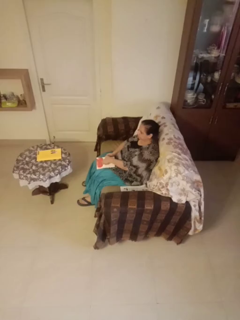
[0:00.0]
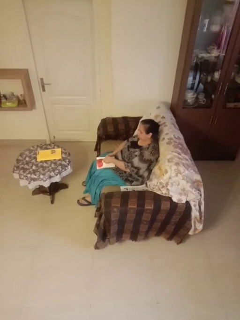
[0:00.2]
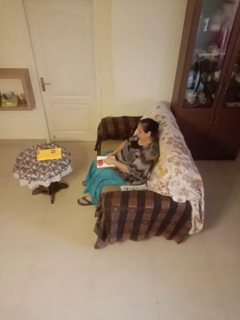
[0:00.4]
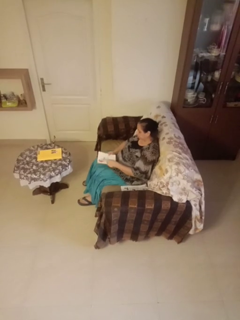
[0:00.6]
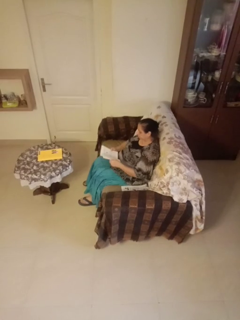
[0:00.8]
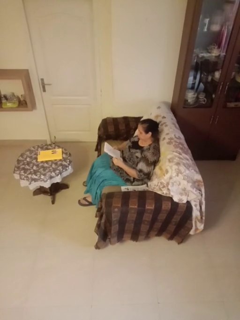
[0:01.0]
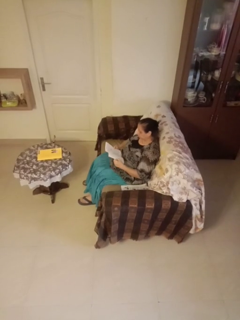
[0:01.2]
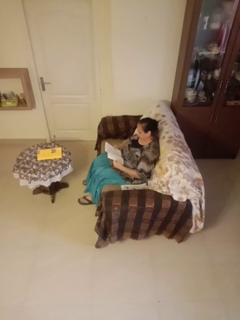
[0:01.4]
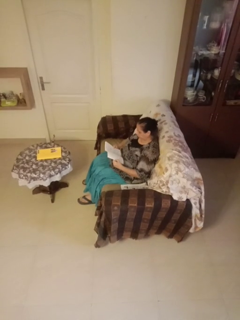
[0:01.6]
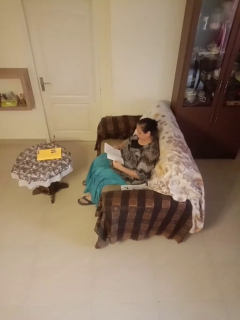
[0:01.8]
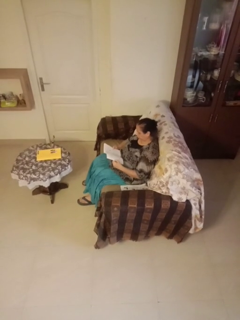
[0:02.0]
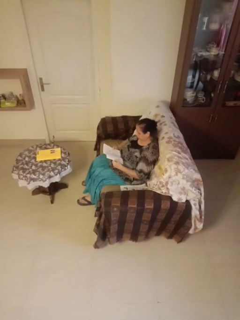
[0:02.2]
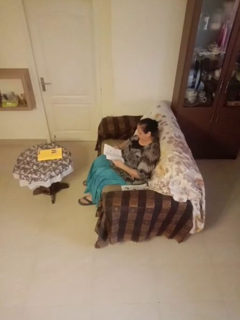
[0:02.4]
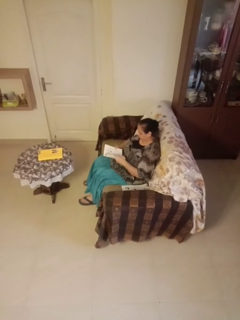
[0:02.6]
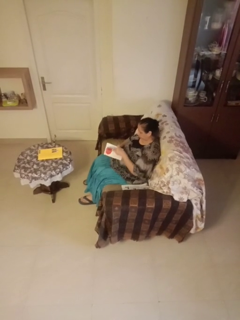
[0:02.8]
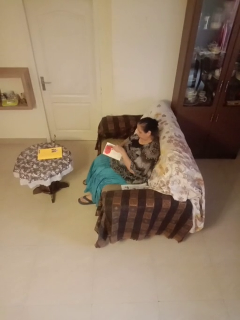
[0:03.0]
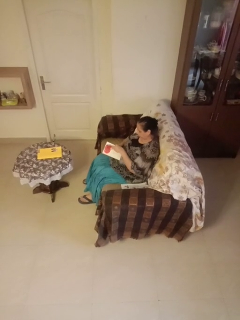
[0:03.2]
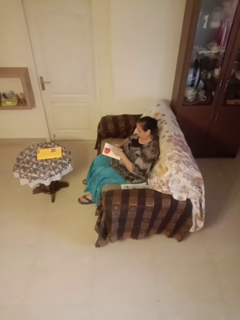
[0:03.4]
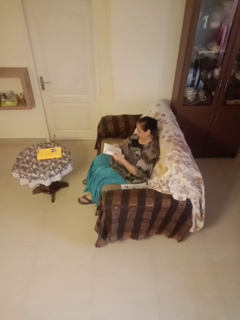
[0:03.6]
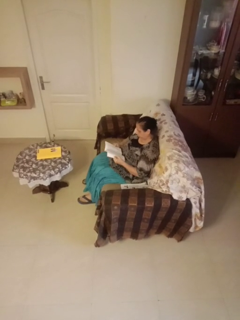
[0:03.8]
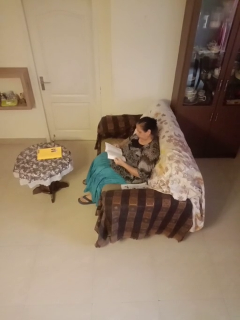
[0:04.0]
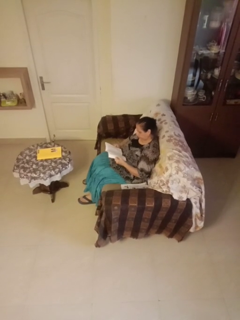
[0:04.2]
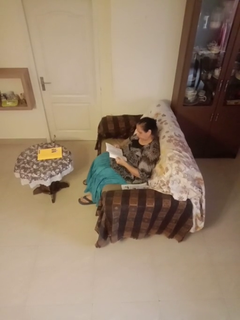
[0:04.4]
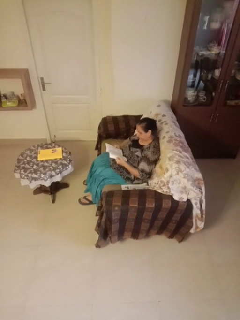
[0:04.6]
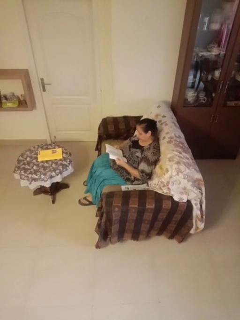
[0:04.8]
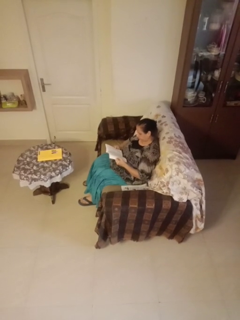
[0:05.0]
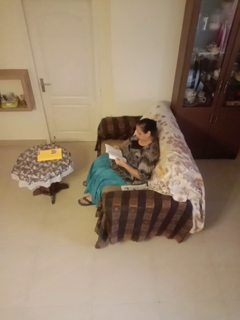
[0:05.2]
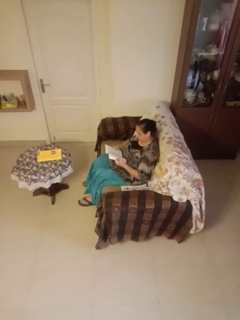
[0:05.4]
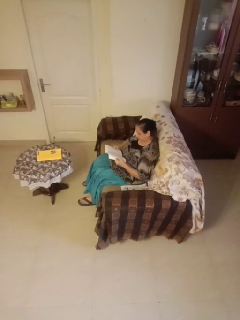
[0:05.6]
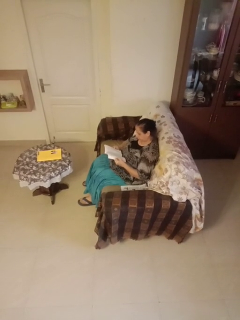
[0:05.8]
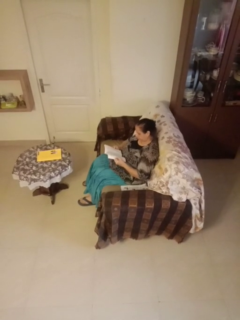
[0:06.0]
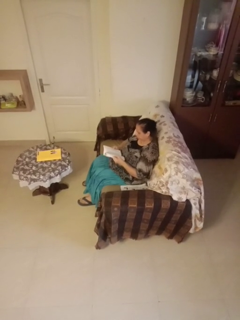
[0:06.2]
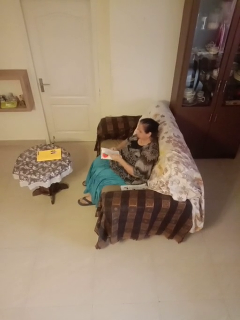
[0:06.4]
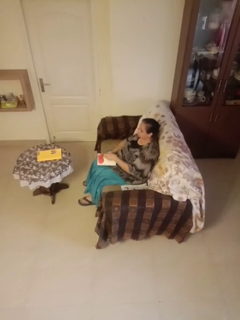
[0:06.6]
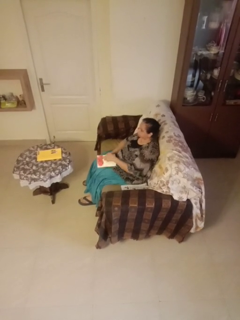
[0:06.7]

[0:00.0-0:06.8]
person reads book

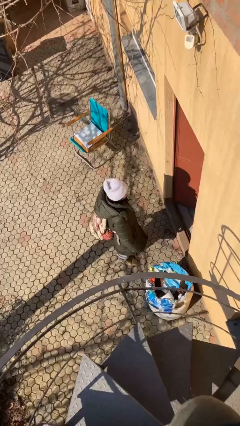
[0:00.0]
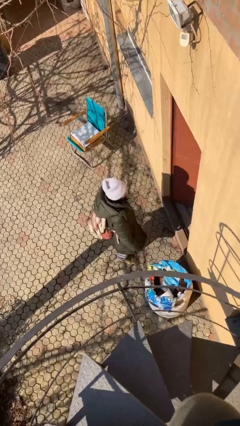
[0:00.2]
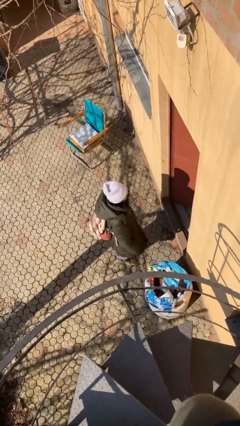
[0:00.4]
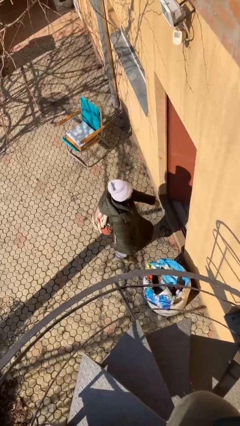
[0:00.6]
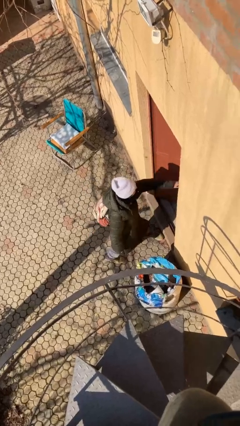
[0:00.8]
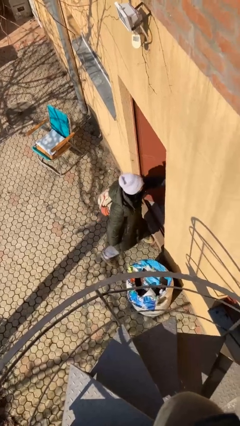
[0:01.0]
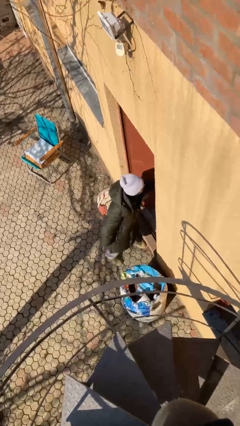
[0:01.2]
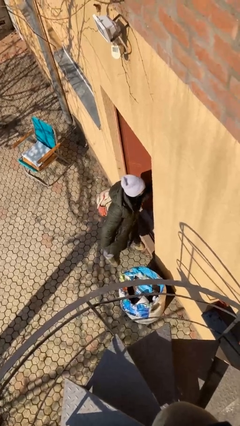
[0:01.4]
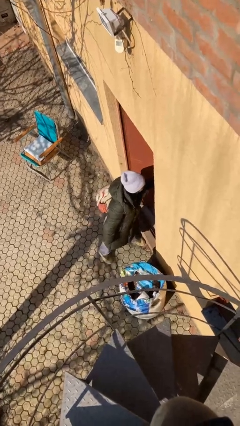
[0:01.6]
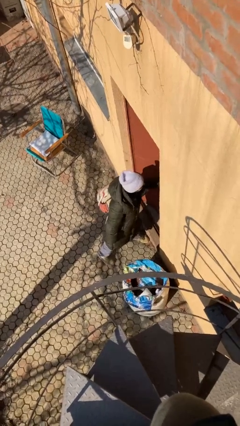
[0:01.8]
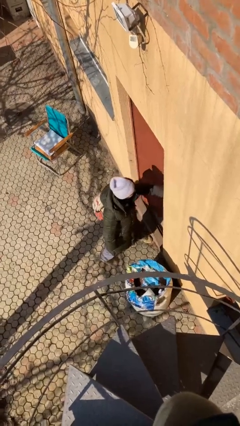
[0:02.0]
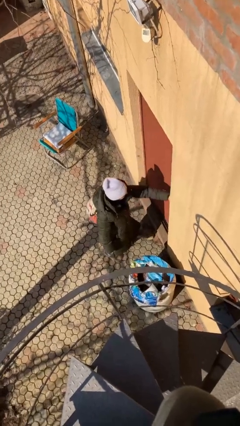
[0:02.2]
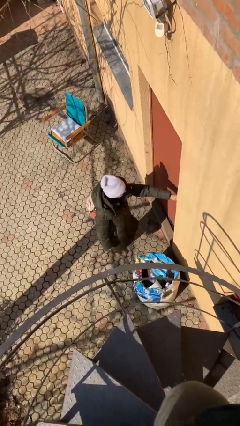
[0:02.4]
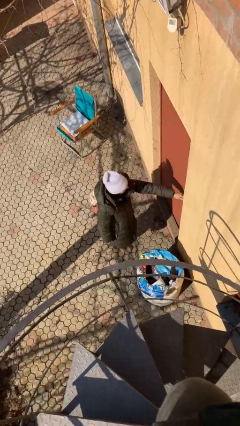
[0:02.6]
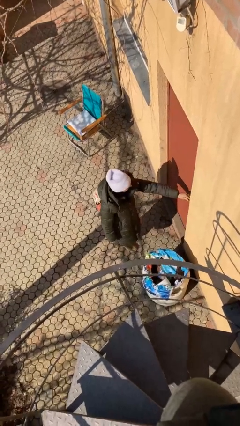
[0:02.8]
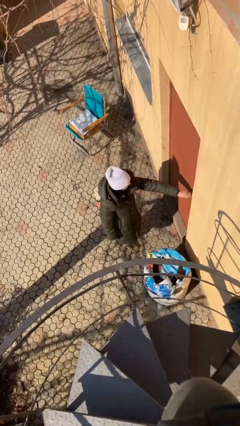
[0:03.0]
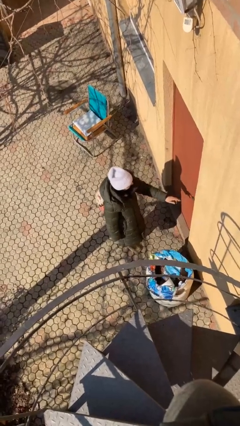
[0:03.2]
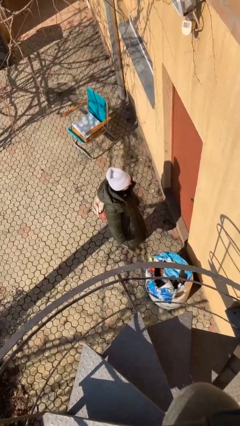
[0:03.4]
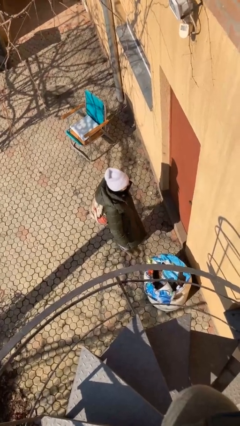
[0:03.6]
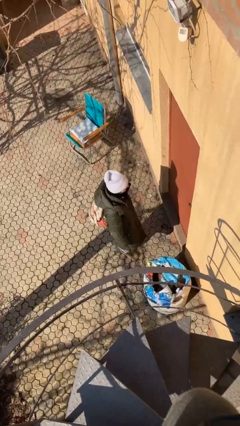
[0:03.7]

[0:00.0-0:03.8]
person closes facility door

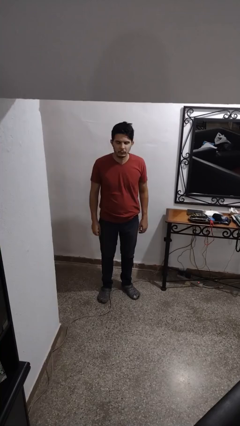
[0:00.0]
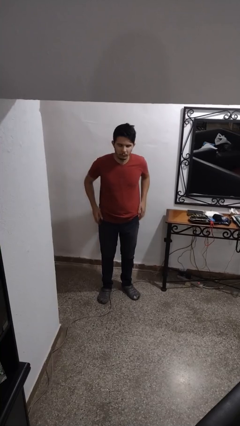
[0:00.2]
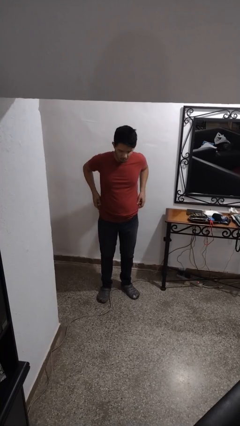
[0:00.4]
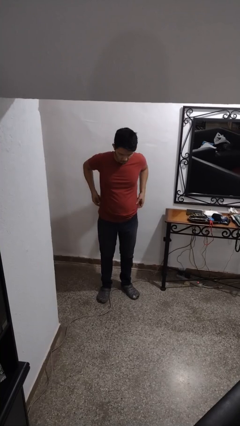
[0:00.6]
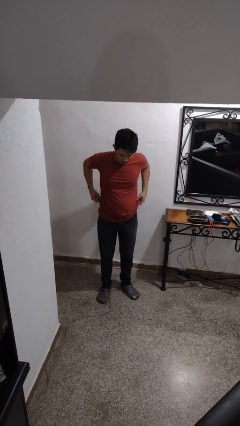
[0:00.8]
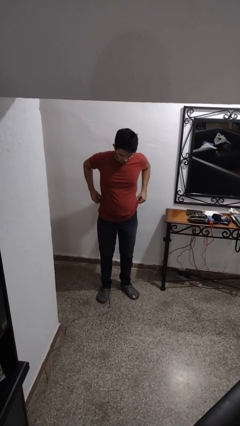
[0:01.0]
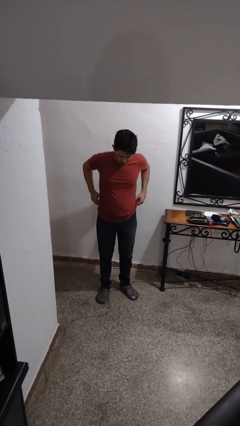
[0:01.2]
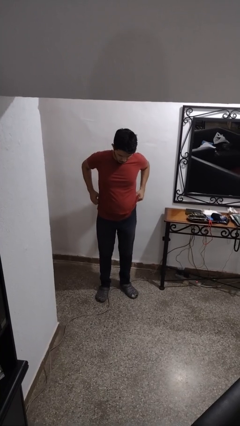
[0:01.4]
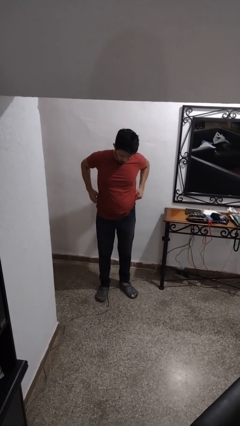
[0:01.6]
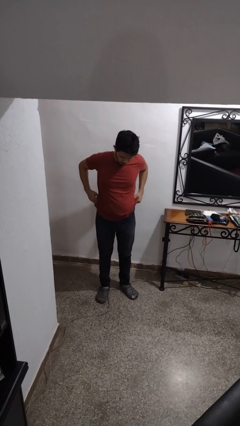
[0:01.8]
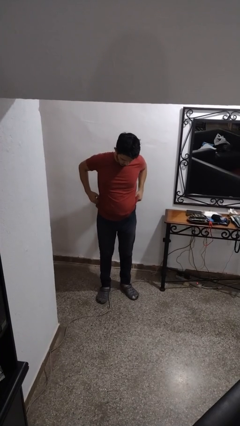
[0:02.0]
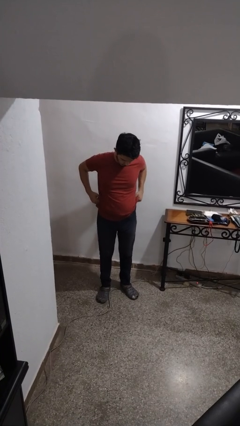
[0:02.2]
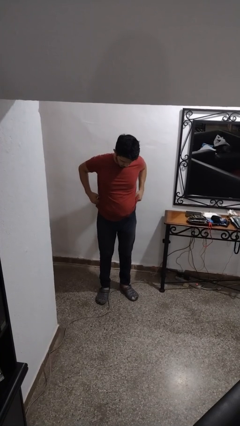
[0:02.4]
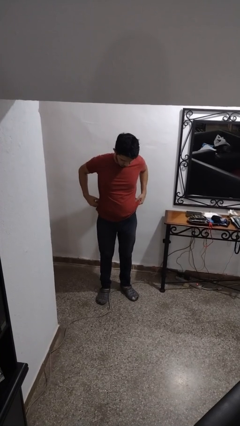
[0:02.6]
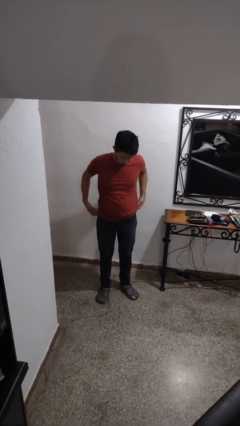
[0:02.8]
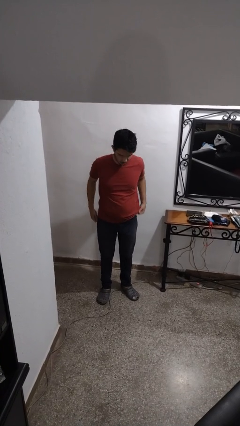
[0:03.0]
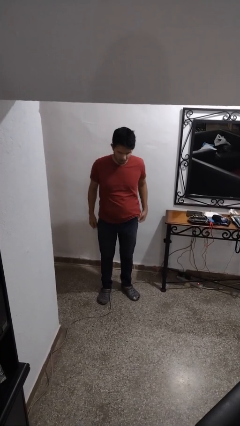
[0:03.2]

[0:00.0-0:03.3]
person hikes up pants

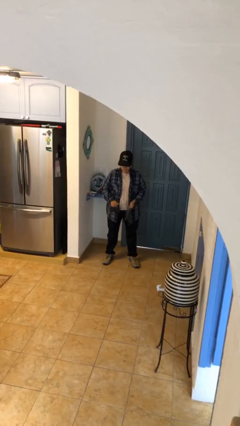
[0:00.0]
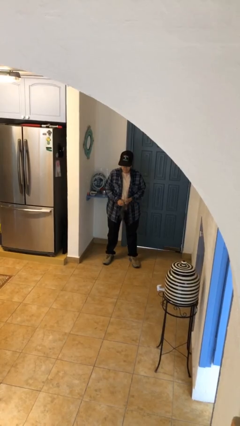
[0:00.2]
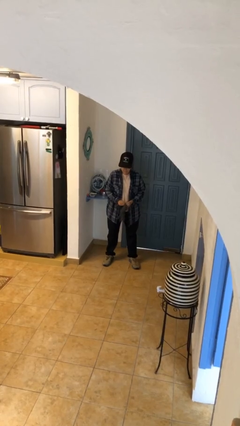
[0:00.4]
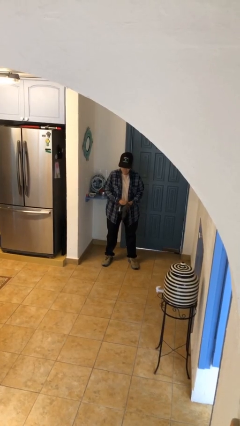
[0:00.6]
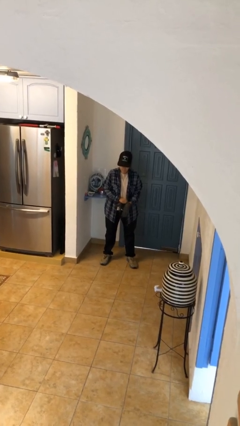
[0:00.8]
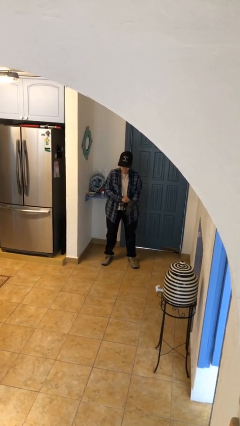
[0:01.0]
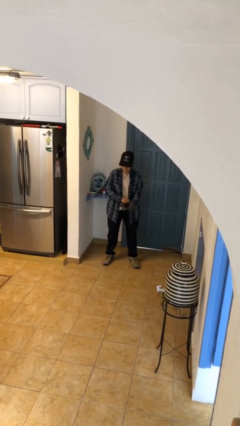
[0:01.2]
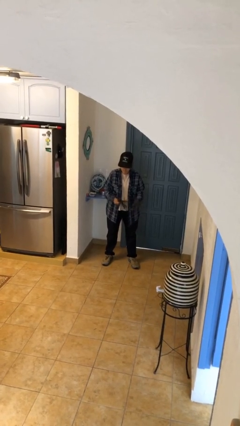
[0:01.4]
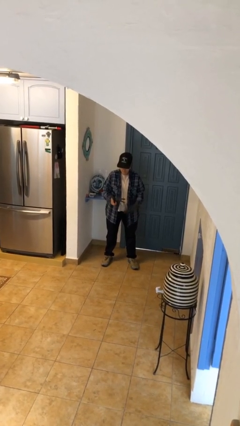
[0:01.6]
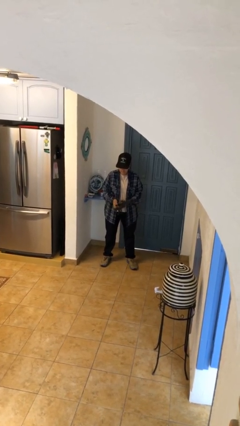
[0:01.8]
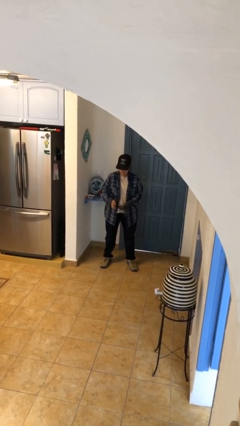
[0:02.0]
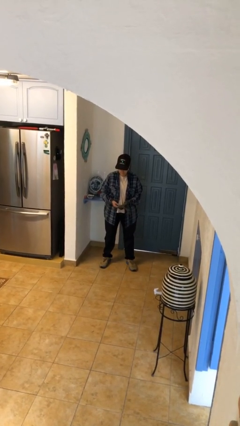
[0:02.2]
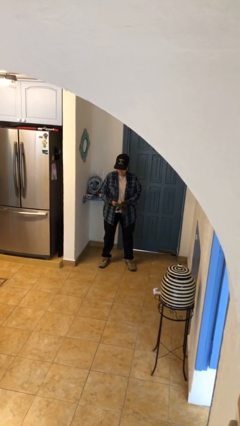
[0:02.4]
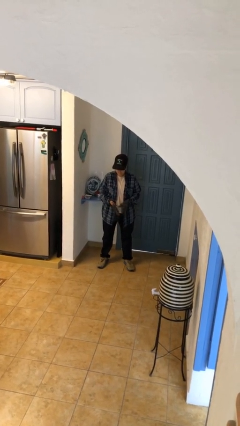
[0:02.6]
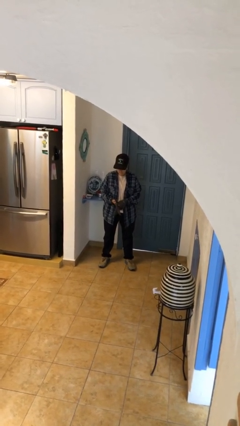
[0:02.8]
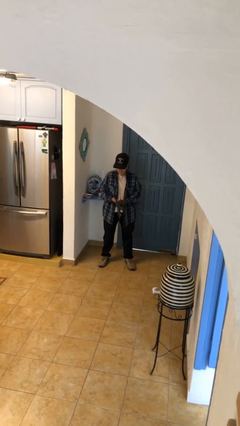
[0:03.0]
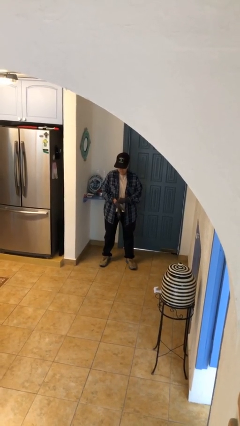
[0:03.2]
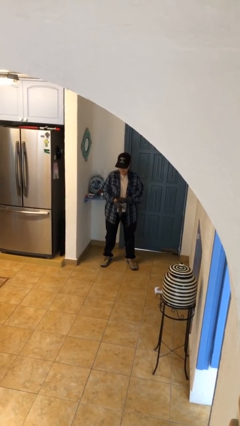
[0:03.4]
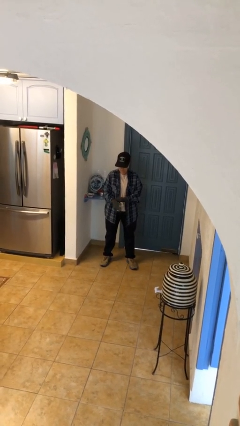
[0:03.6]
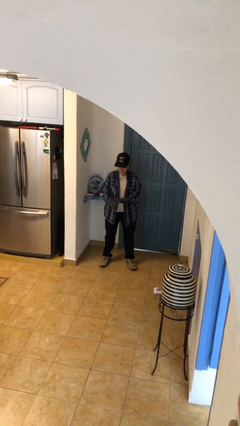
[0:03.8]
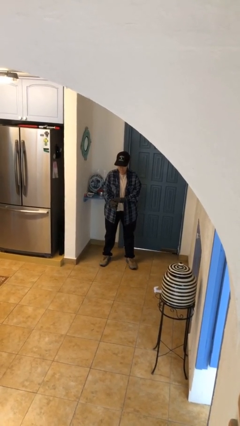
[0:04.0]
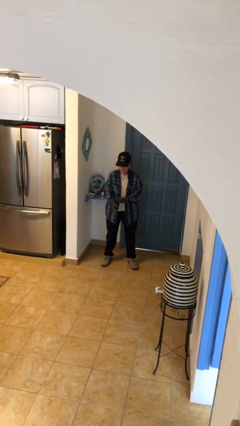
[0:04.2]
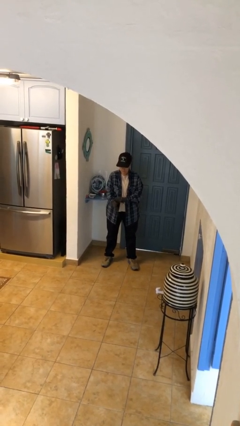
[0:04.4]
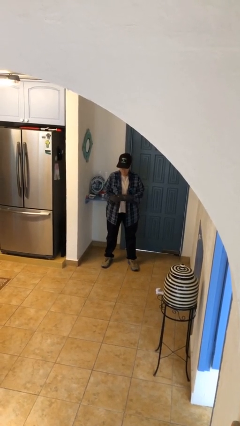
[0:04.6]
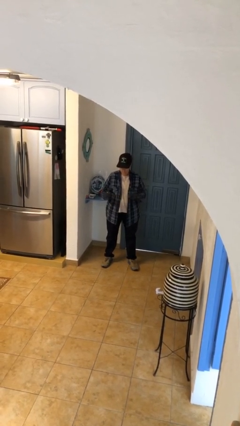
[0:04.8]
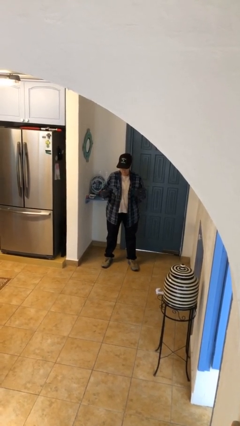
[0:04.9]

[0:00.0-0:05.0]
person puts on gloves

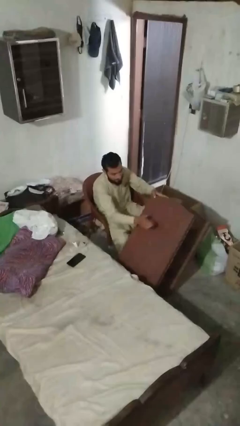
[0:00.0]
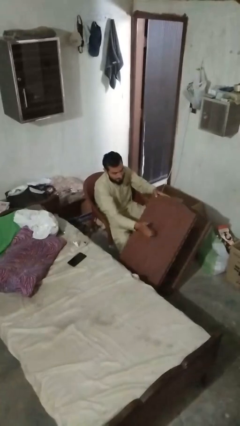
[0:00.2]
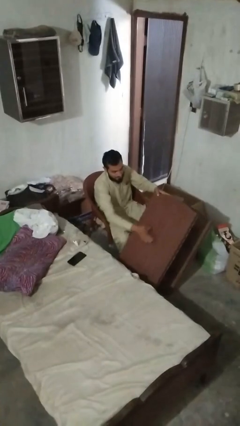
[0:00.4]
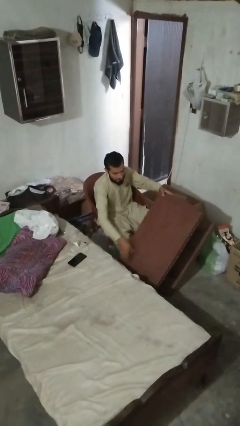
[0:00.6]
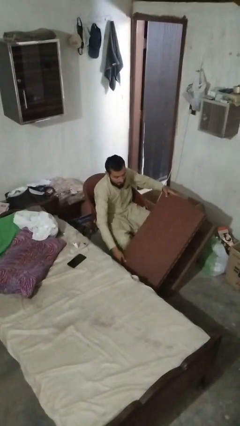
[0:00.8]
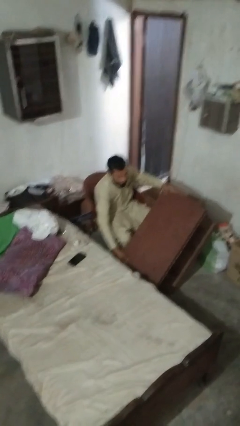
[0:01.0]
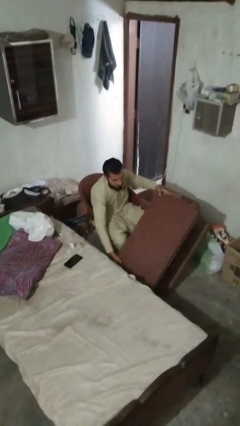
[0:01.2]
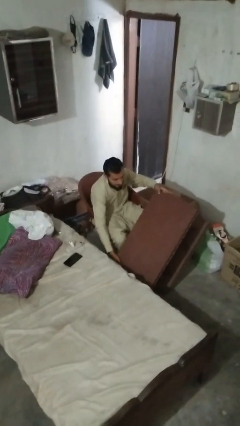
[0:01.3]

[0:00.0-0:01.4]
person knocks over furniture
